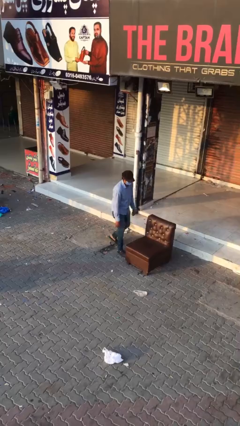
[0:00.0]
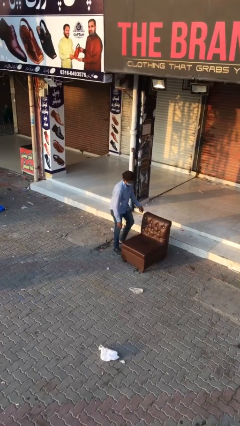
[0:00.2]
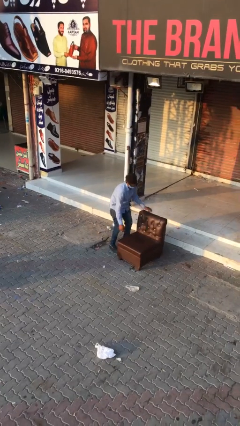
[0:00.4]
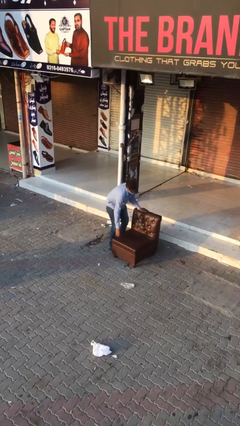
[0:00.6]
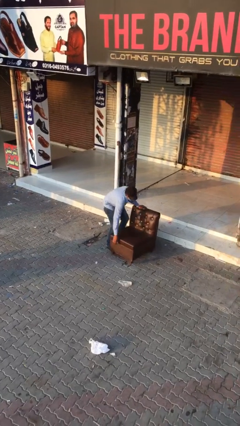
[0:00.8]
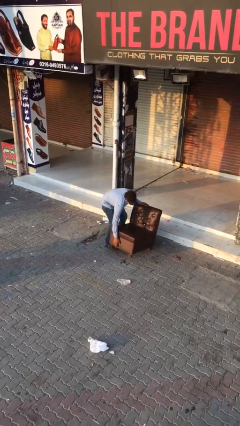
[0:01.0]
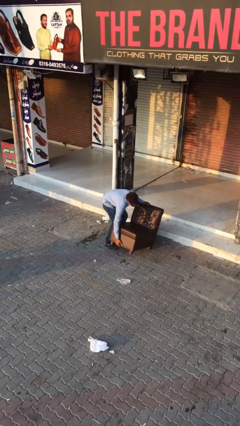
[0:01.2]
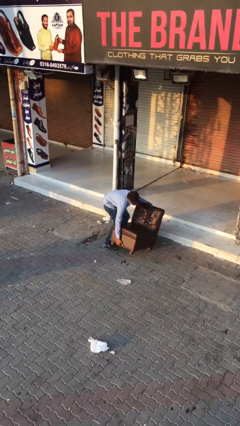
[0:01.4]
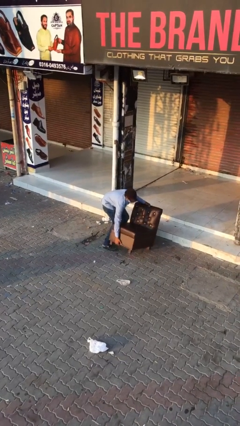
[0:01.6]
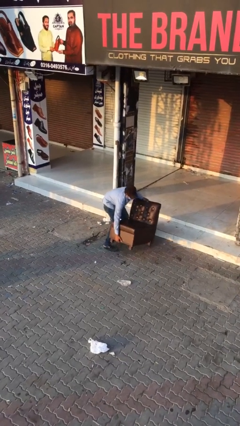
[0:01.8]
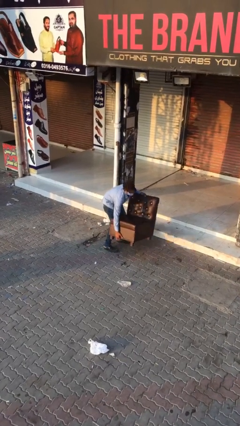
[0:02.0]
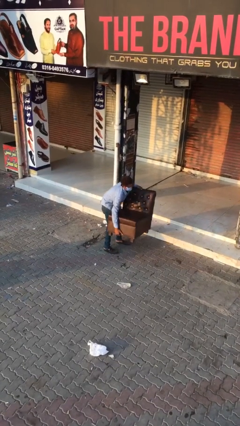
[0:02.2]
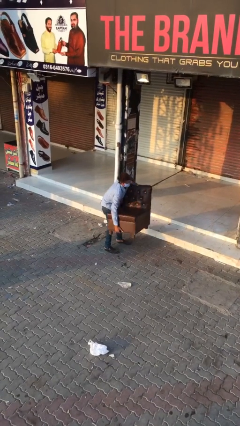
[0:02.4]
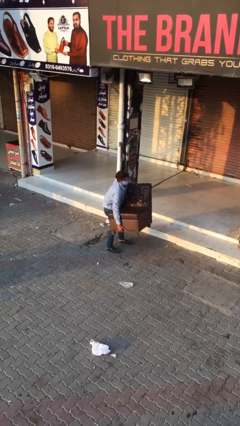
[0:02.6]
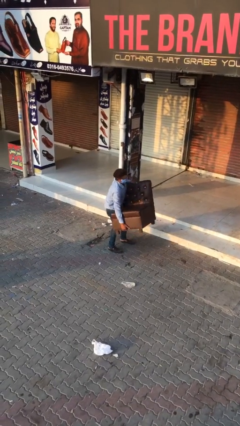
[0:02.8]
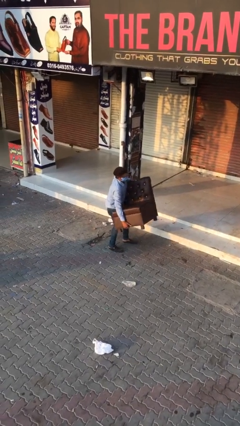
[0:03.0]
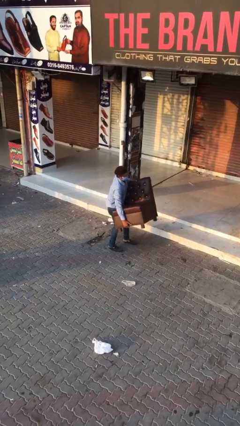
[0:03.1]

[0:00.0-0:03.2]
person picks up object from floor

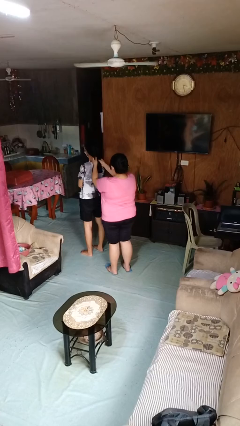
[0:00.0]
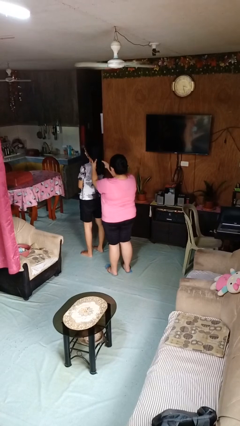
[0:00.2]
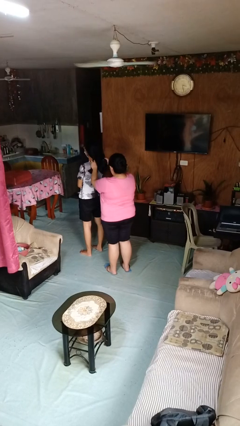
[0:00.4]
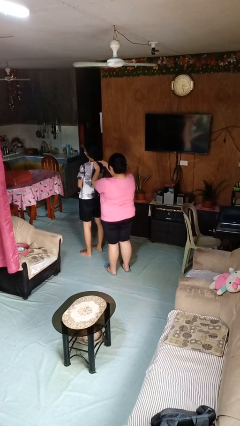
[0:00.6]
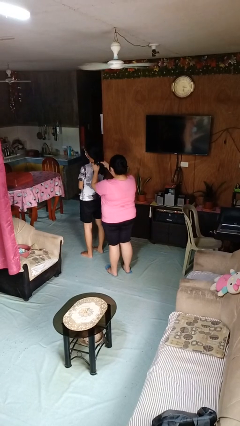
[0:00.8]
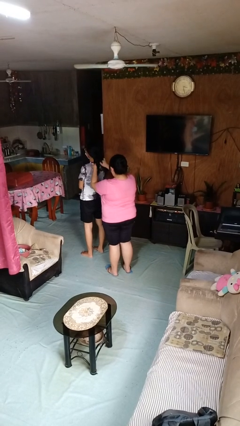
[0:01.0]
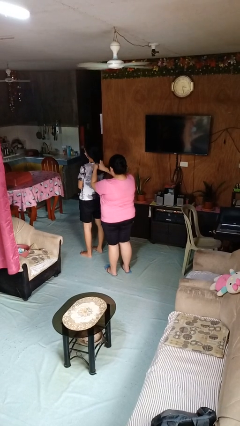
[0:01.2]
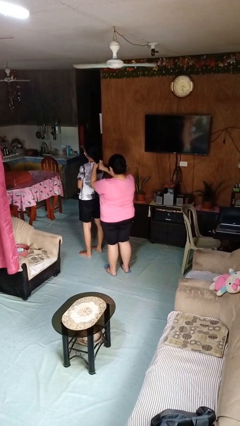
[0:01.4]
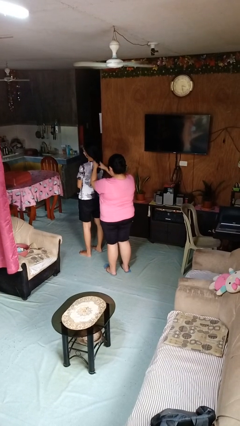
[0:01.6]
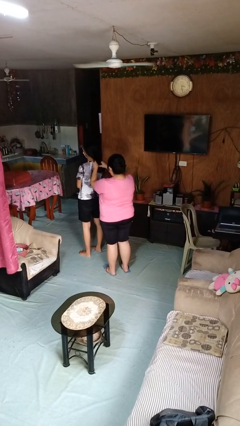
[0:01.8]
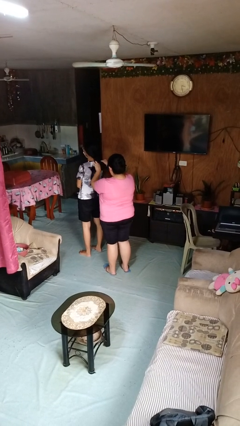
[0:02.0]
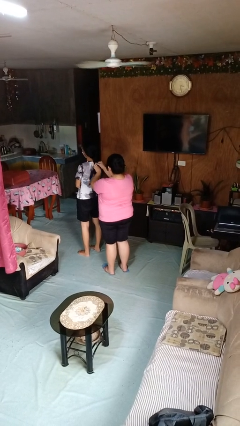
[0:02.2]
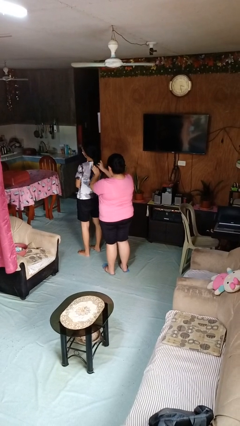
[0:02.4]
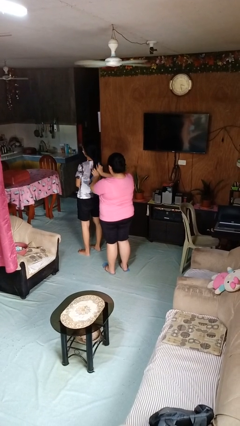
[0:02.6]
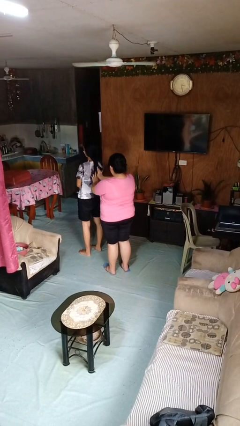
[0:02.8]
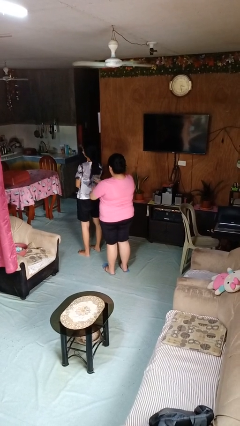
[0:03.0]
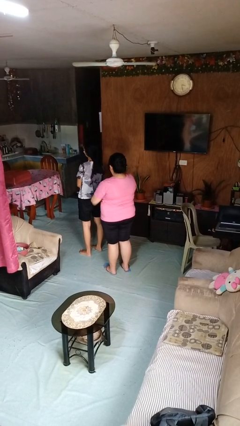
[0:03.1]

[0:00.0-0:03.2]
person braids hair of person

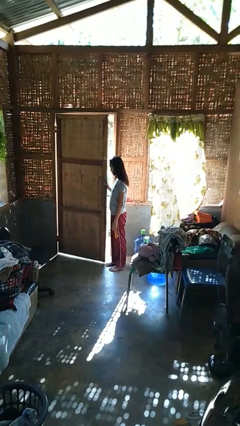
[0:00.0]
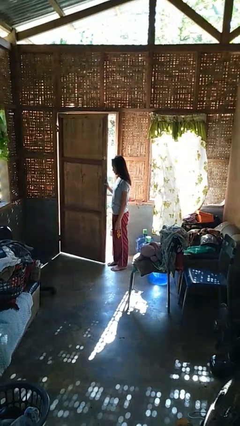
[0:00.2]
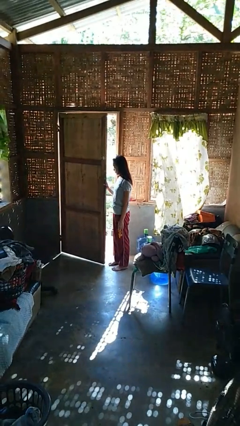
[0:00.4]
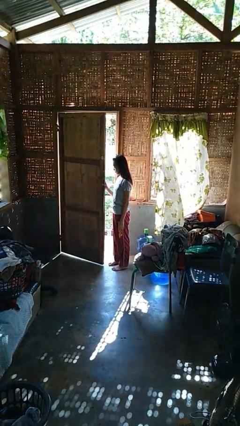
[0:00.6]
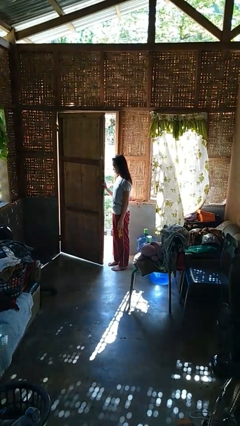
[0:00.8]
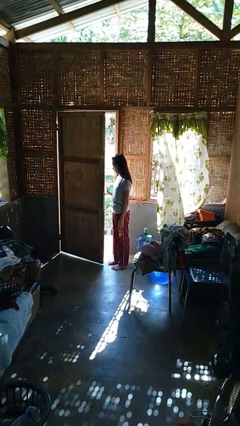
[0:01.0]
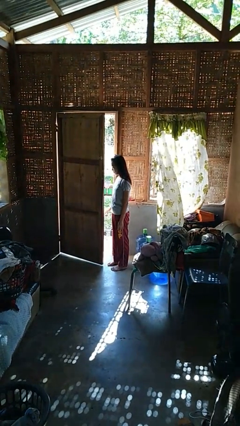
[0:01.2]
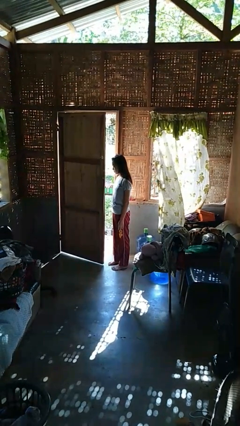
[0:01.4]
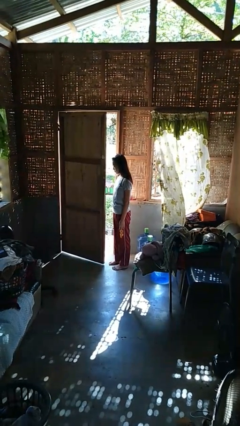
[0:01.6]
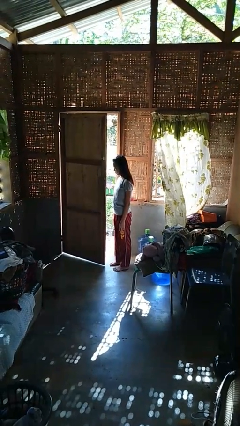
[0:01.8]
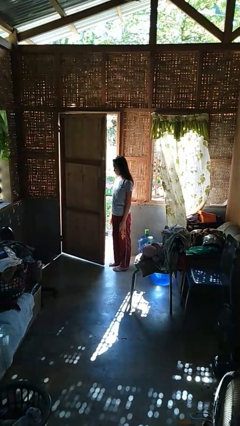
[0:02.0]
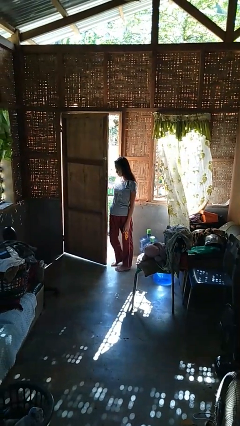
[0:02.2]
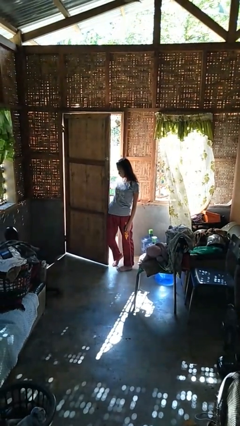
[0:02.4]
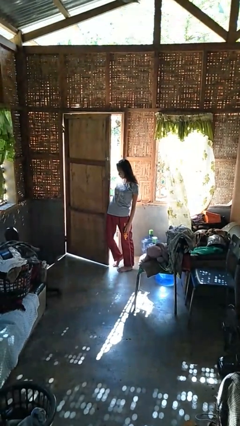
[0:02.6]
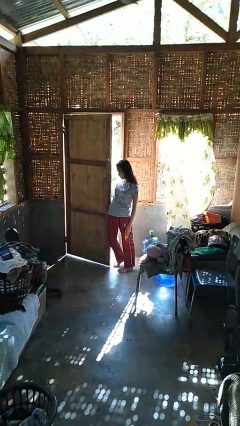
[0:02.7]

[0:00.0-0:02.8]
person opens facility door

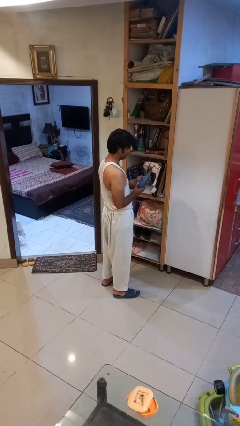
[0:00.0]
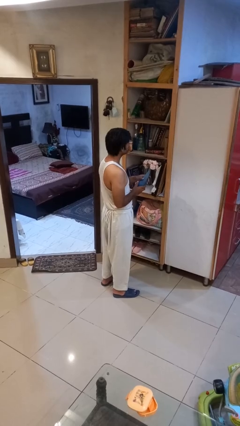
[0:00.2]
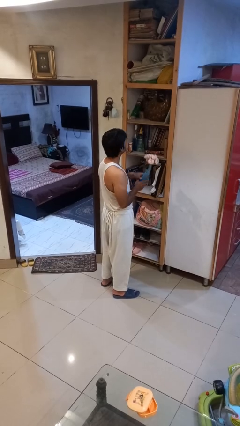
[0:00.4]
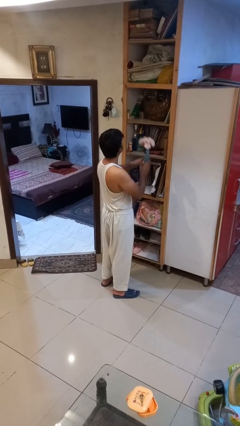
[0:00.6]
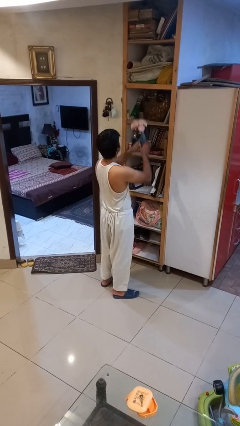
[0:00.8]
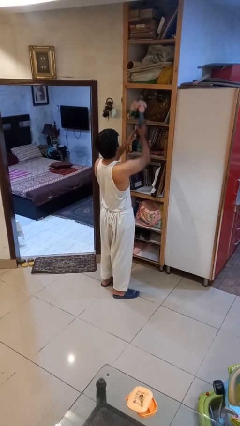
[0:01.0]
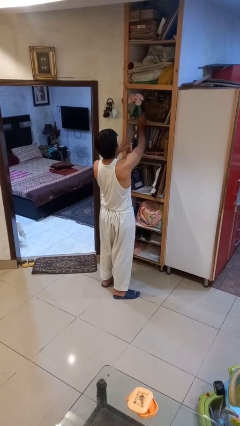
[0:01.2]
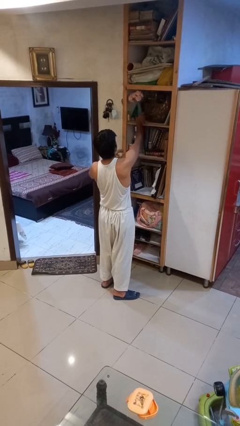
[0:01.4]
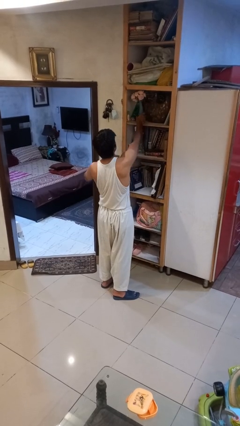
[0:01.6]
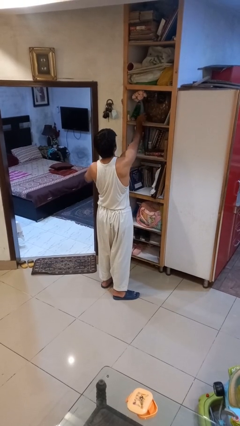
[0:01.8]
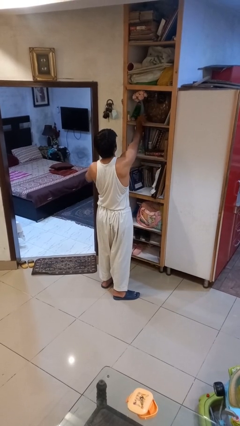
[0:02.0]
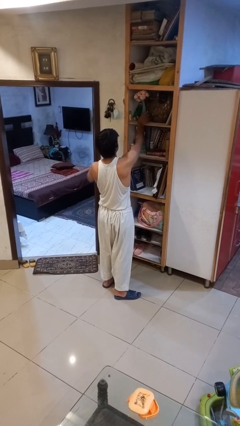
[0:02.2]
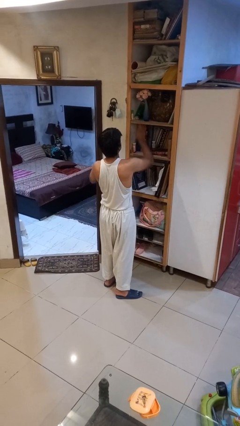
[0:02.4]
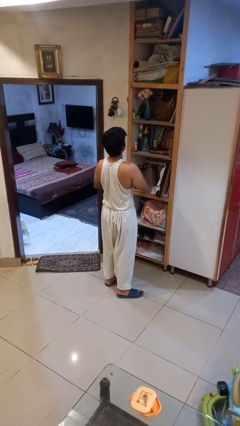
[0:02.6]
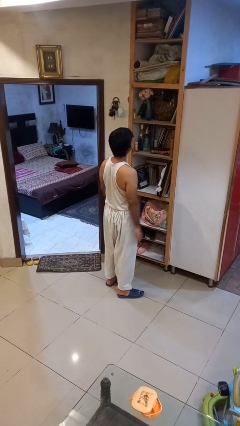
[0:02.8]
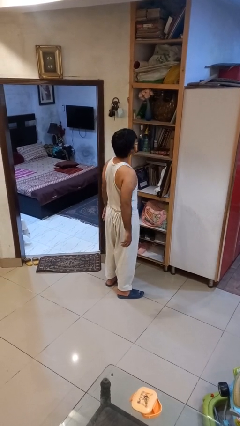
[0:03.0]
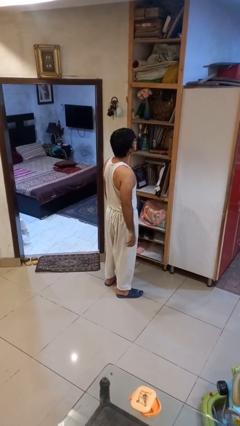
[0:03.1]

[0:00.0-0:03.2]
person puts down object on shelf

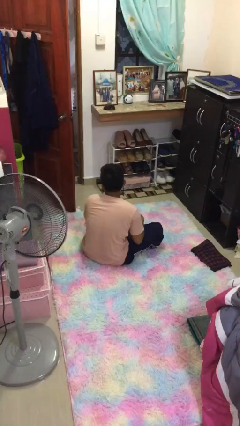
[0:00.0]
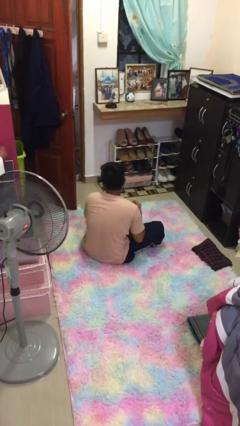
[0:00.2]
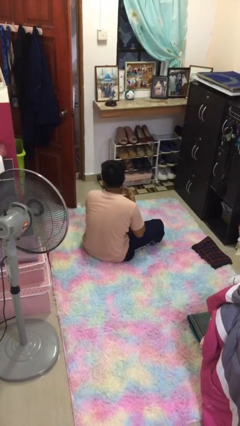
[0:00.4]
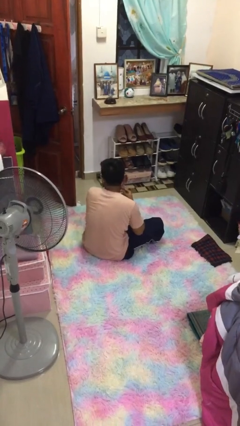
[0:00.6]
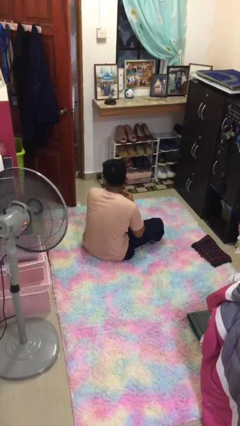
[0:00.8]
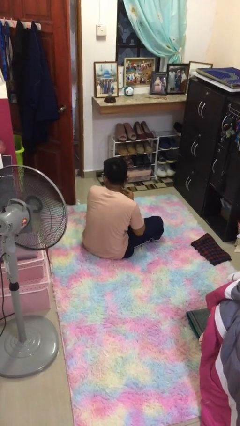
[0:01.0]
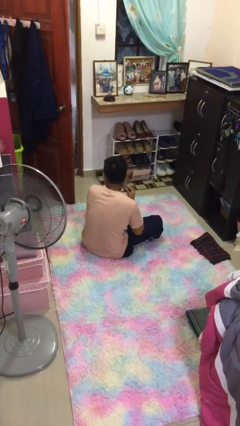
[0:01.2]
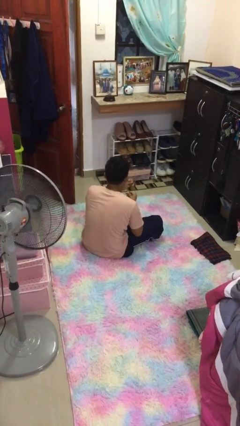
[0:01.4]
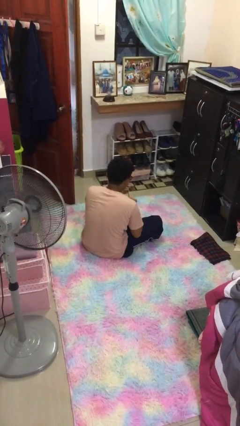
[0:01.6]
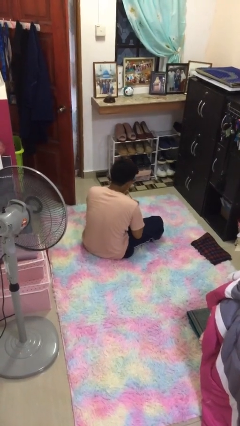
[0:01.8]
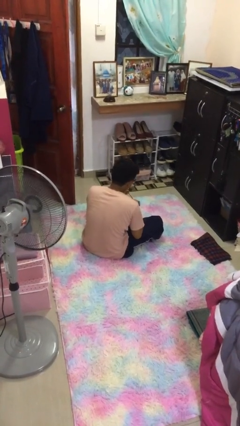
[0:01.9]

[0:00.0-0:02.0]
person takes off earrings

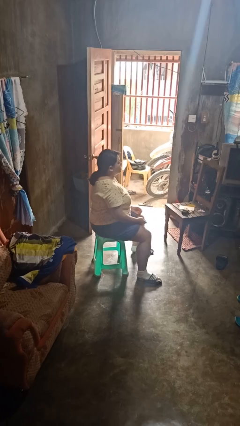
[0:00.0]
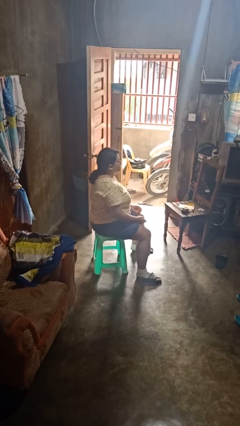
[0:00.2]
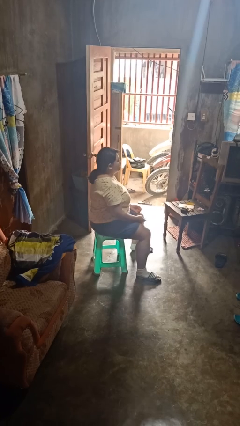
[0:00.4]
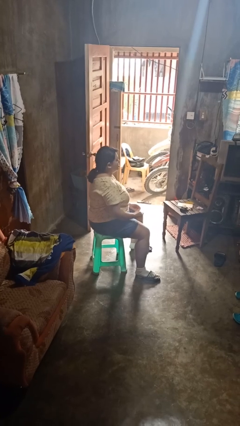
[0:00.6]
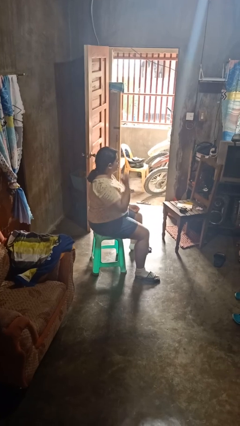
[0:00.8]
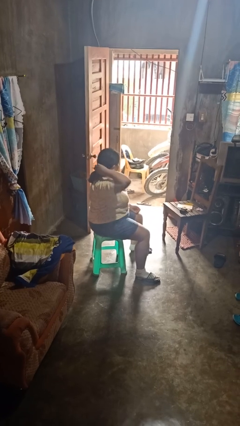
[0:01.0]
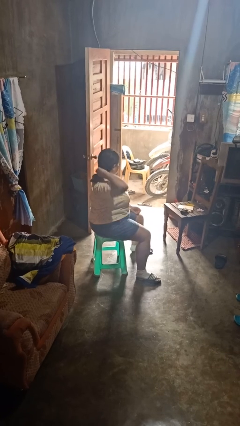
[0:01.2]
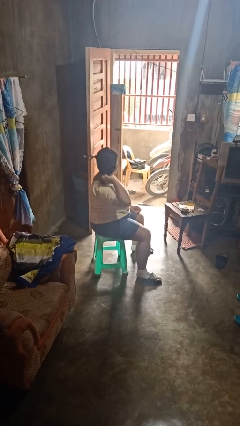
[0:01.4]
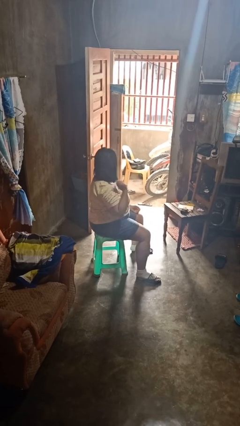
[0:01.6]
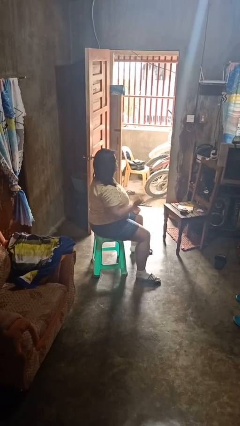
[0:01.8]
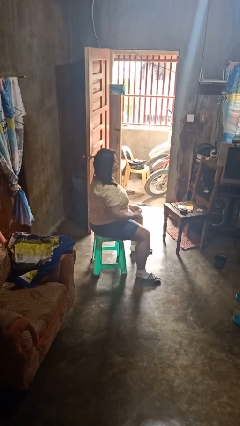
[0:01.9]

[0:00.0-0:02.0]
person takes off hairtie

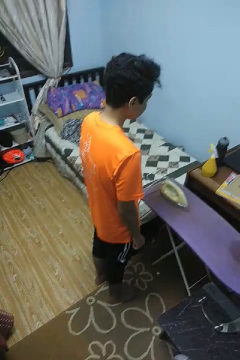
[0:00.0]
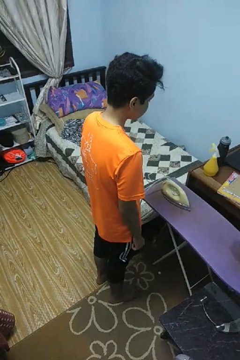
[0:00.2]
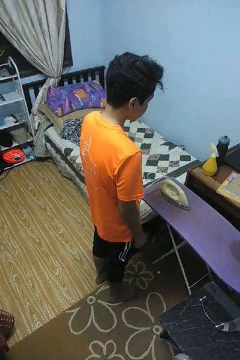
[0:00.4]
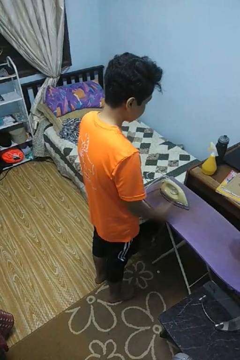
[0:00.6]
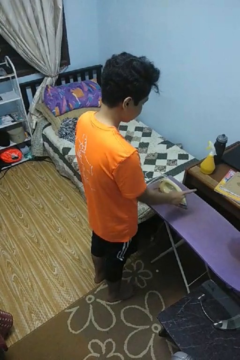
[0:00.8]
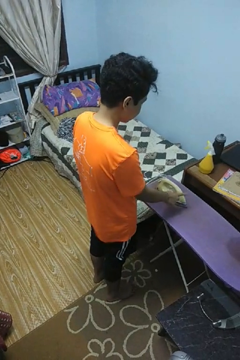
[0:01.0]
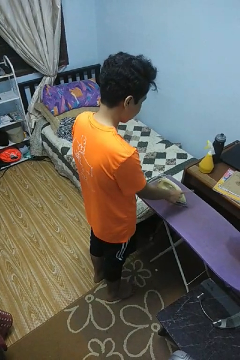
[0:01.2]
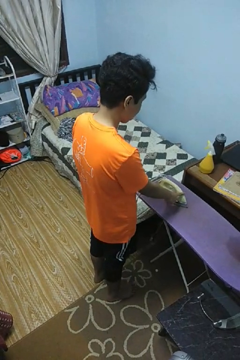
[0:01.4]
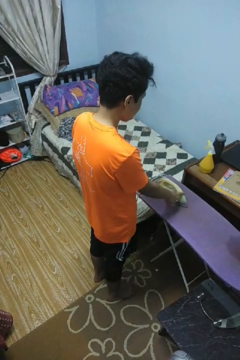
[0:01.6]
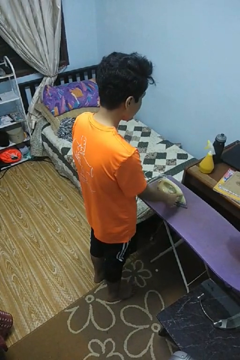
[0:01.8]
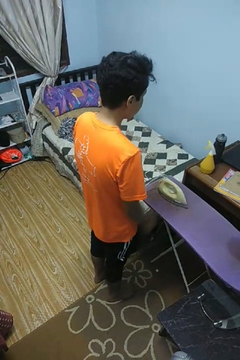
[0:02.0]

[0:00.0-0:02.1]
person taps object with finger
